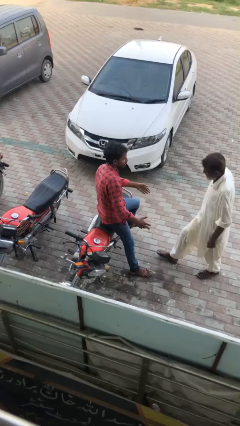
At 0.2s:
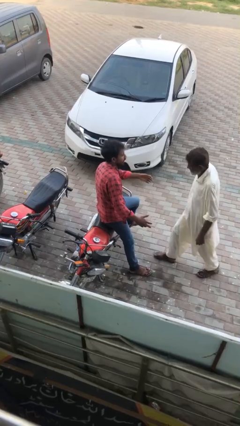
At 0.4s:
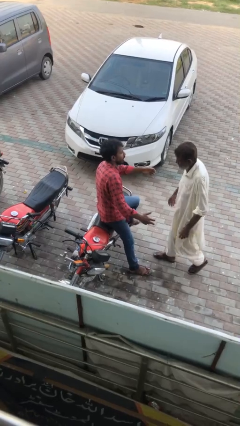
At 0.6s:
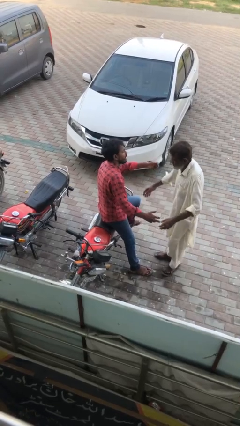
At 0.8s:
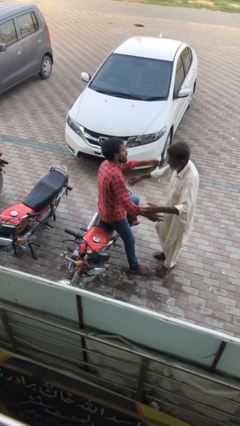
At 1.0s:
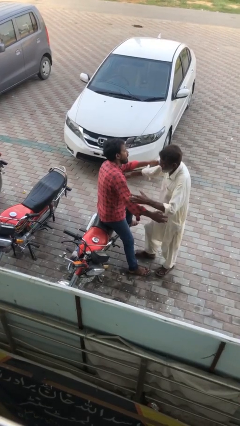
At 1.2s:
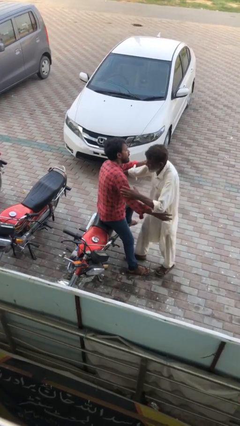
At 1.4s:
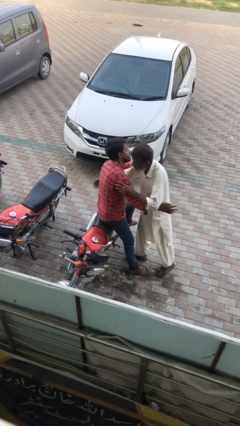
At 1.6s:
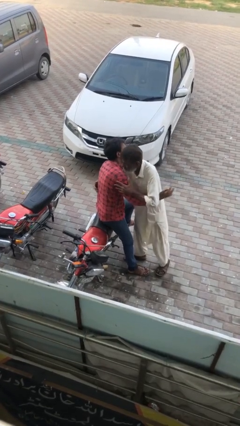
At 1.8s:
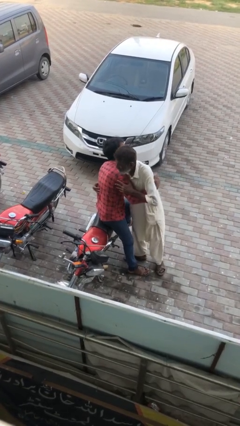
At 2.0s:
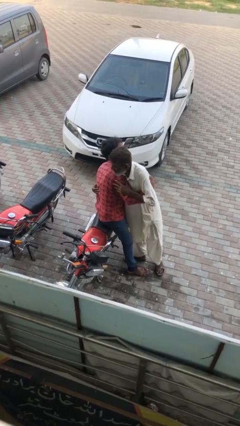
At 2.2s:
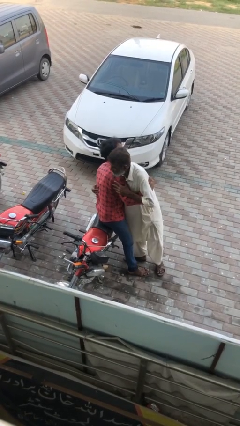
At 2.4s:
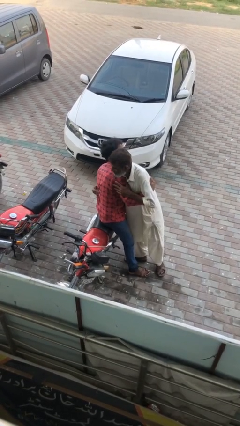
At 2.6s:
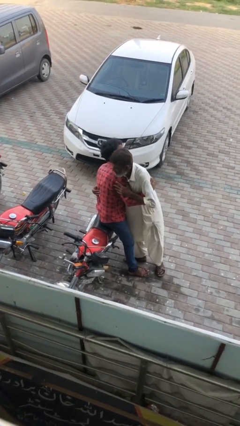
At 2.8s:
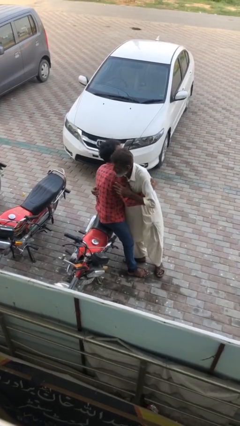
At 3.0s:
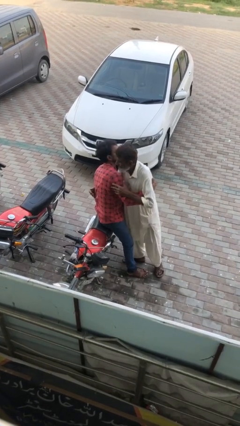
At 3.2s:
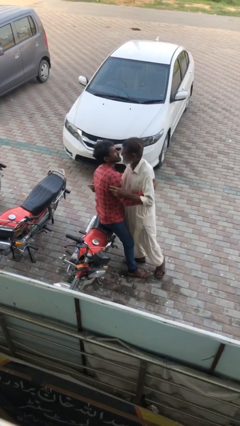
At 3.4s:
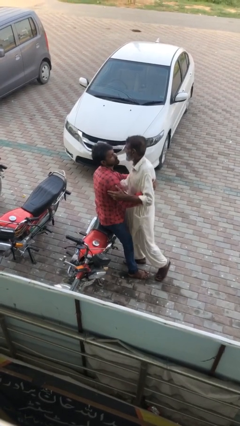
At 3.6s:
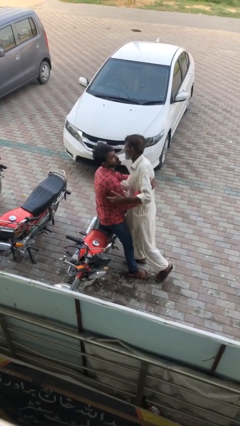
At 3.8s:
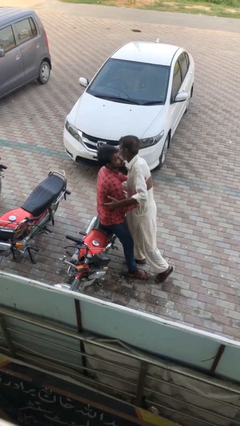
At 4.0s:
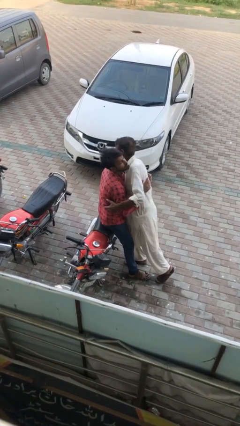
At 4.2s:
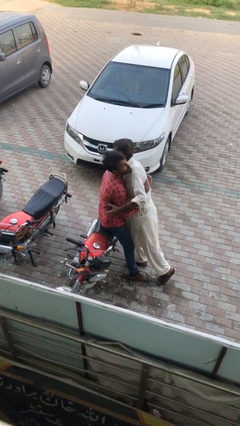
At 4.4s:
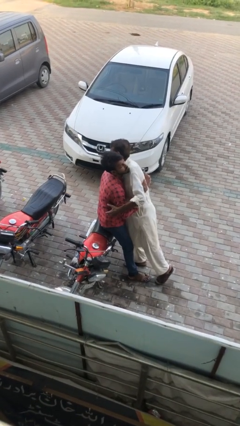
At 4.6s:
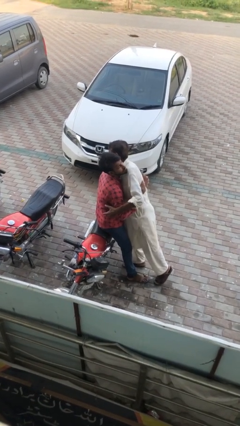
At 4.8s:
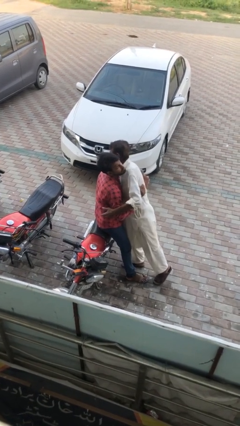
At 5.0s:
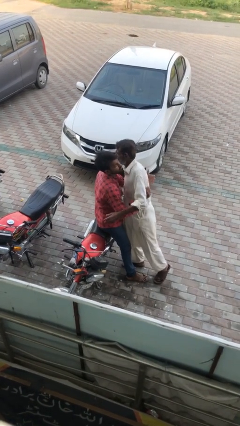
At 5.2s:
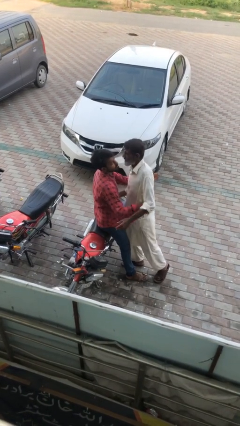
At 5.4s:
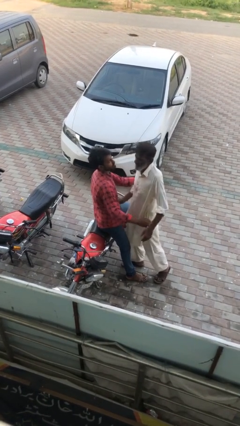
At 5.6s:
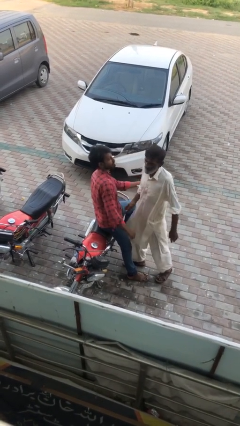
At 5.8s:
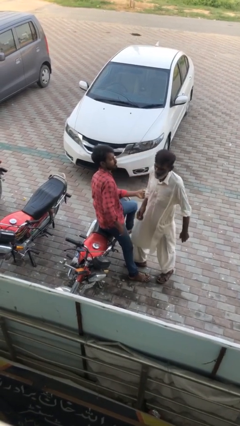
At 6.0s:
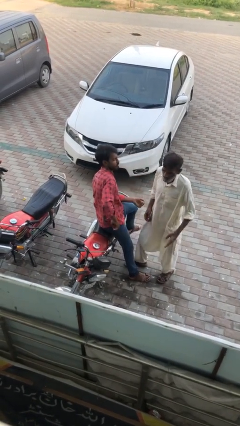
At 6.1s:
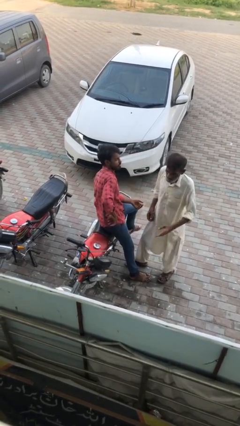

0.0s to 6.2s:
person embraces person

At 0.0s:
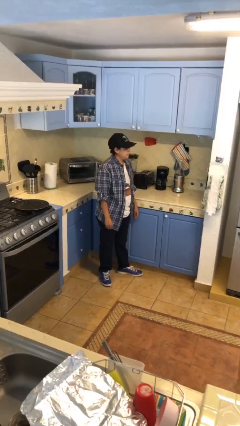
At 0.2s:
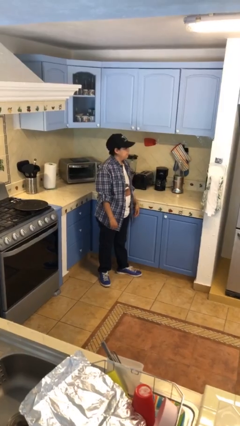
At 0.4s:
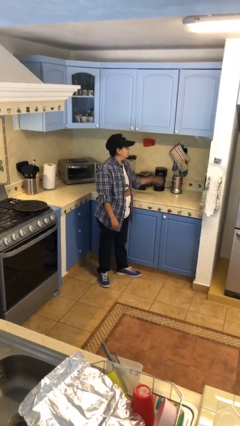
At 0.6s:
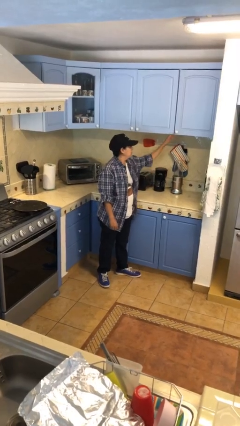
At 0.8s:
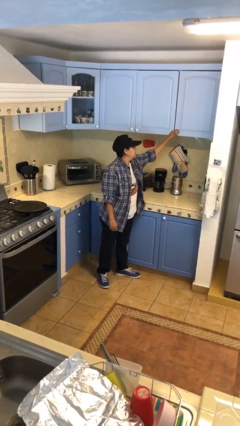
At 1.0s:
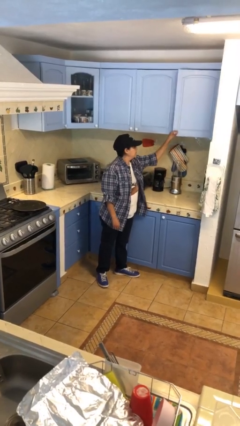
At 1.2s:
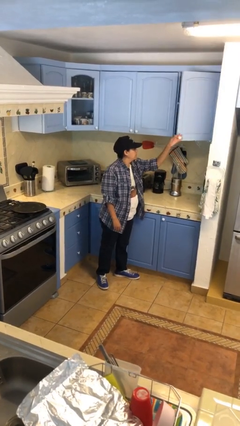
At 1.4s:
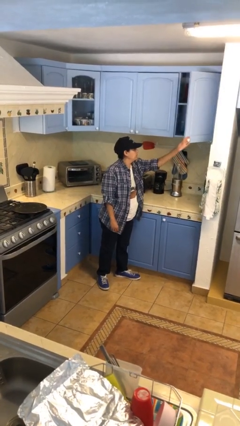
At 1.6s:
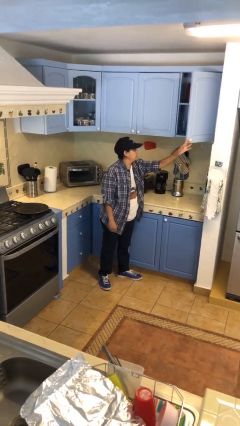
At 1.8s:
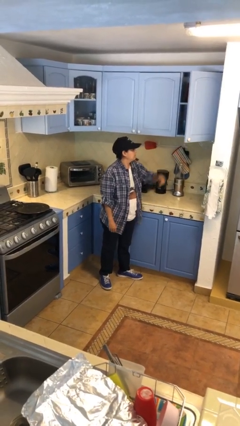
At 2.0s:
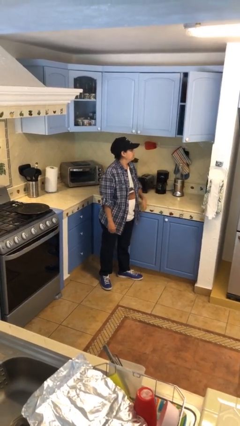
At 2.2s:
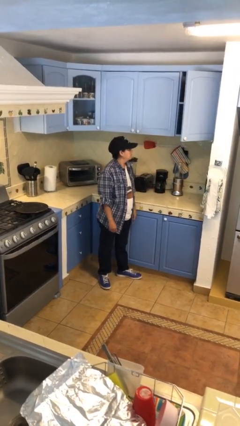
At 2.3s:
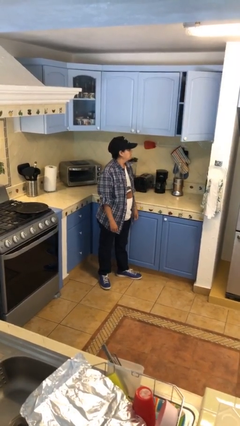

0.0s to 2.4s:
person opens cabinet

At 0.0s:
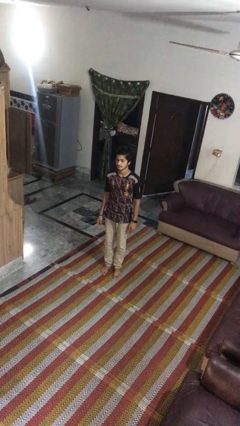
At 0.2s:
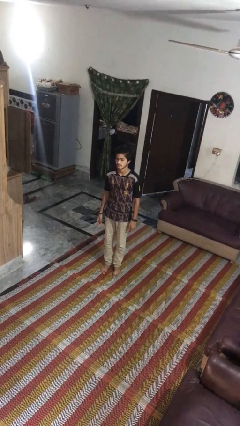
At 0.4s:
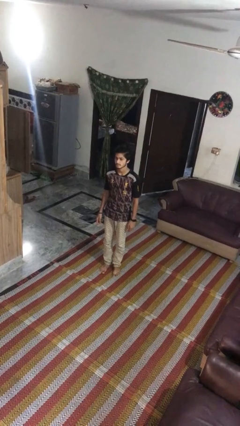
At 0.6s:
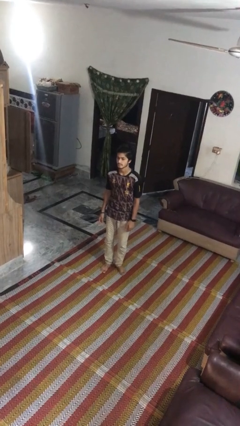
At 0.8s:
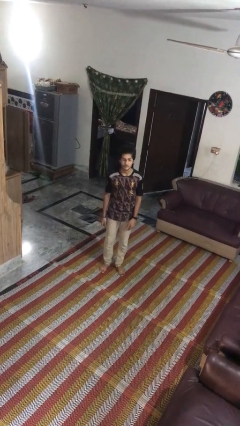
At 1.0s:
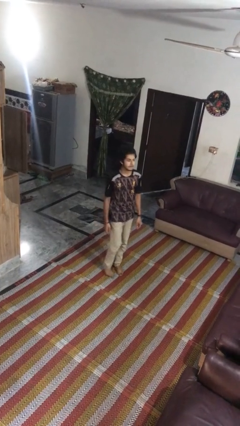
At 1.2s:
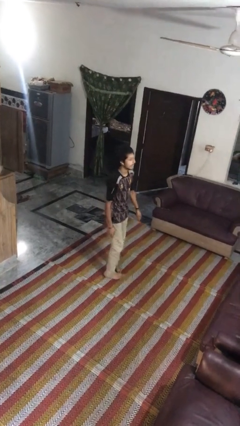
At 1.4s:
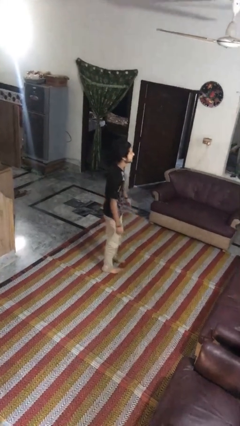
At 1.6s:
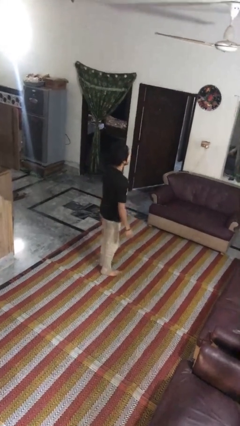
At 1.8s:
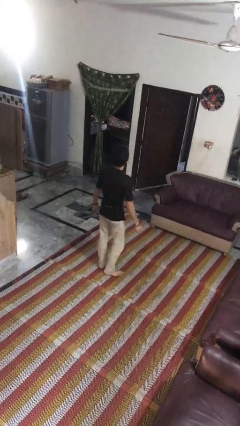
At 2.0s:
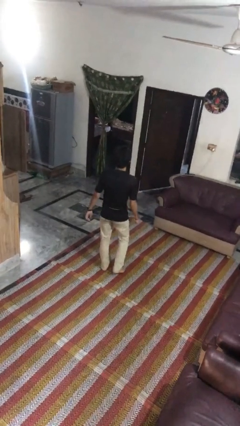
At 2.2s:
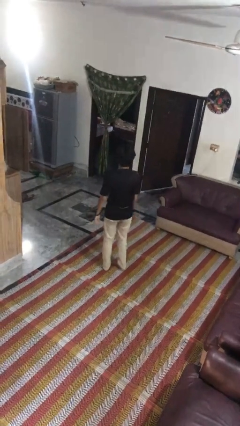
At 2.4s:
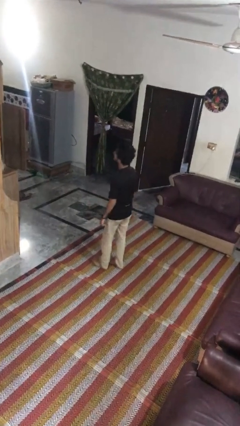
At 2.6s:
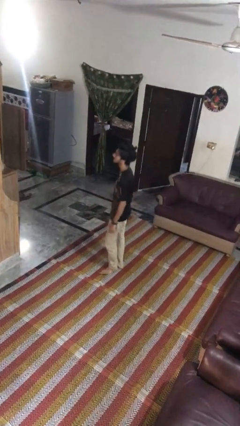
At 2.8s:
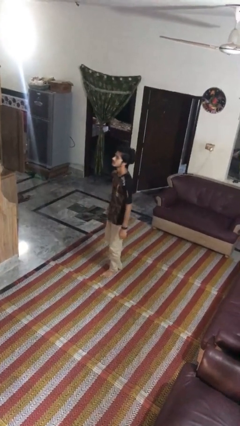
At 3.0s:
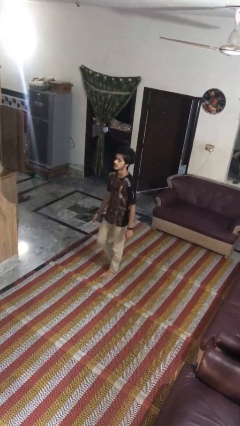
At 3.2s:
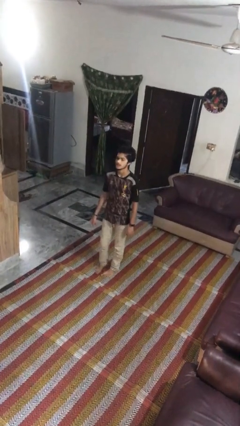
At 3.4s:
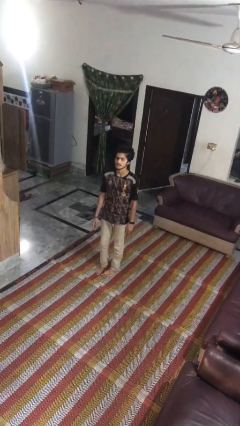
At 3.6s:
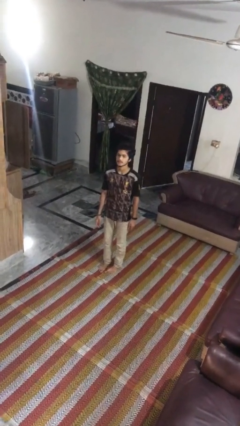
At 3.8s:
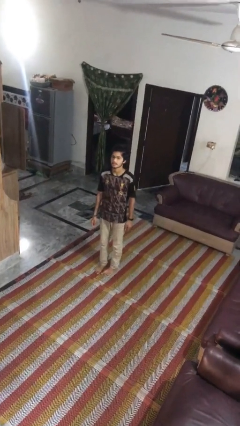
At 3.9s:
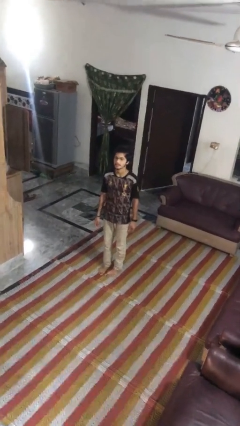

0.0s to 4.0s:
person twirls

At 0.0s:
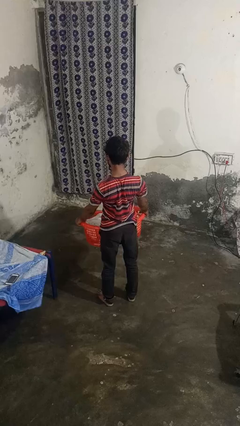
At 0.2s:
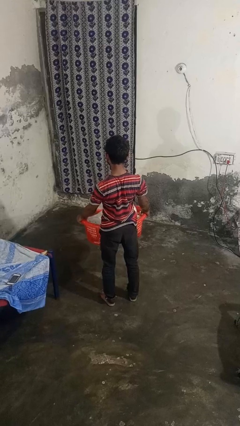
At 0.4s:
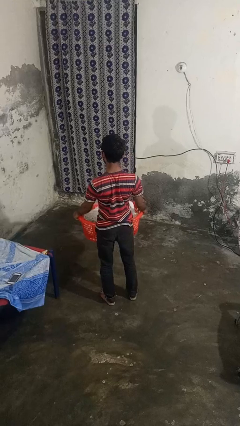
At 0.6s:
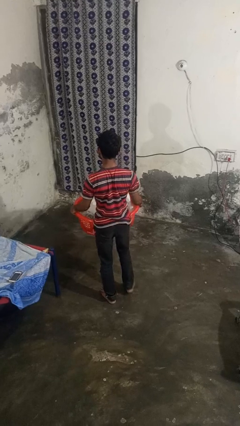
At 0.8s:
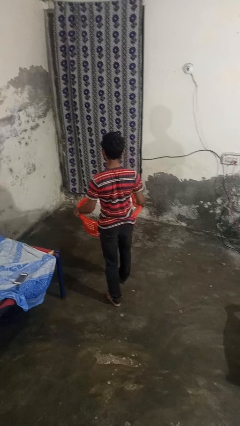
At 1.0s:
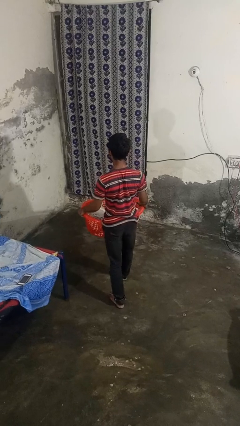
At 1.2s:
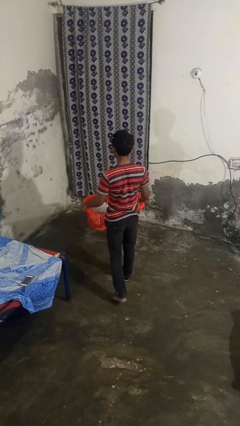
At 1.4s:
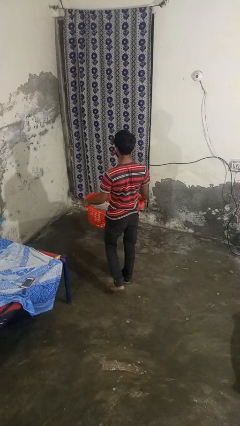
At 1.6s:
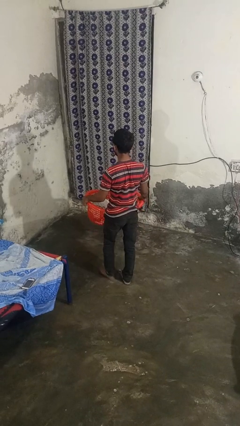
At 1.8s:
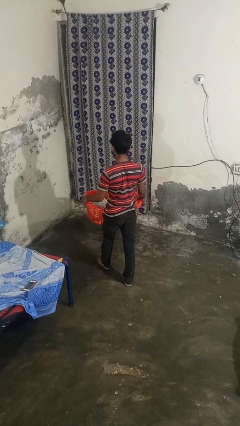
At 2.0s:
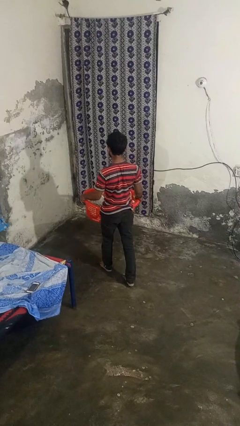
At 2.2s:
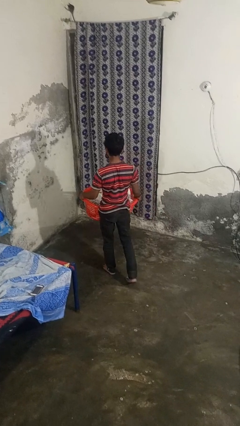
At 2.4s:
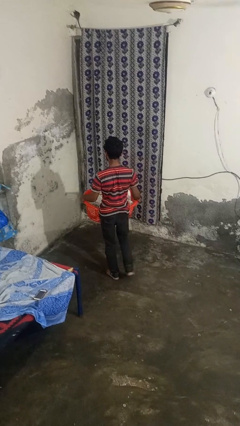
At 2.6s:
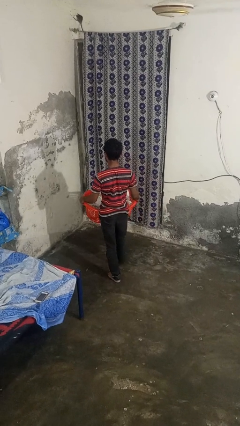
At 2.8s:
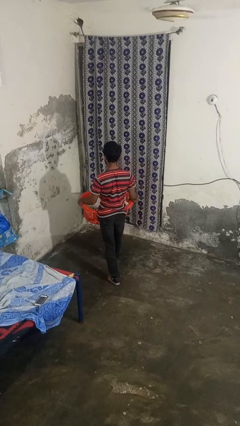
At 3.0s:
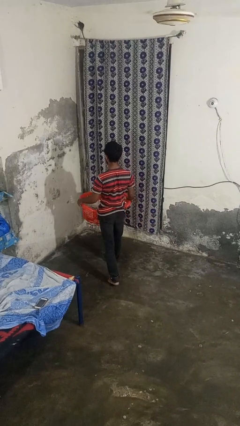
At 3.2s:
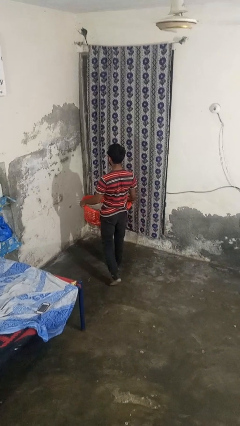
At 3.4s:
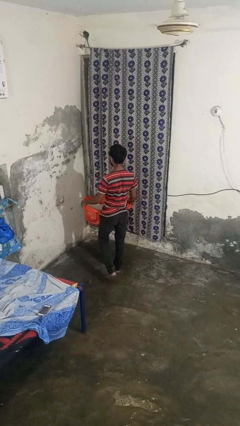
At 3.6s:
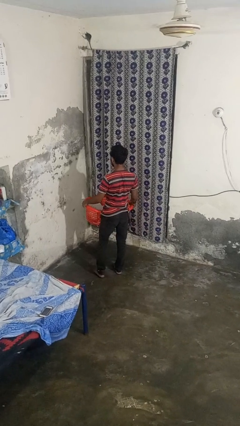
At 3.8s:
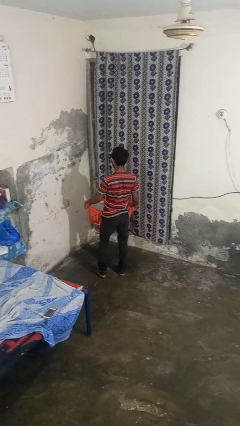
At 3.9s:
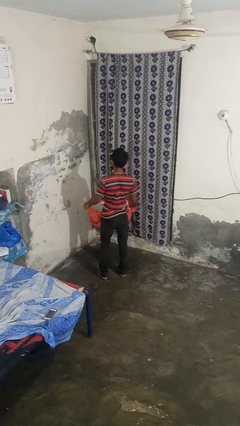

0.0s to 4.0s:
person carries laundry basket

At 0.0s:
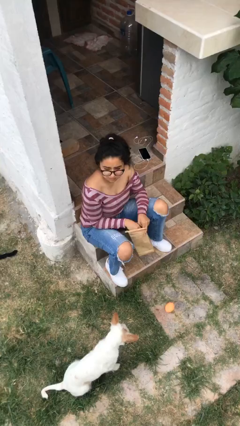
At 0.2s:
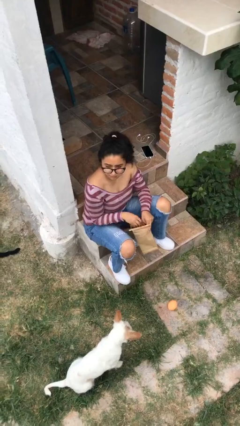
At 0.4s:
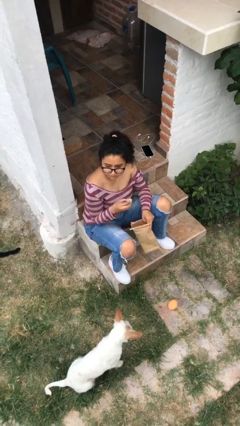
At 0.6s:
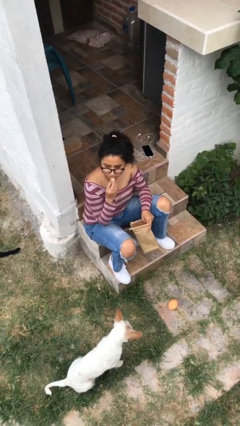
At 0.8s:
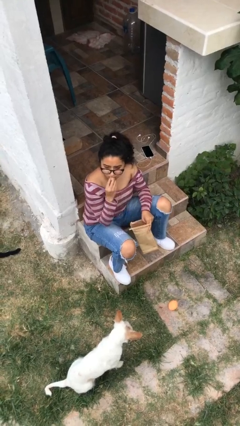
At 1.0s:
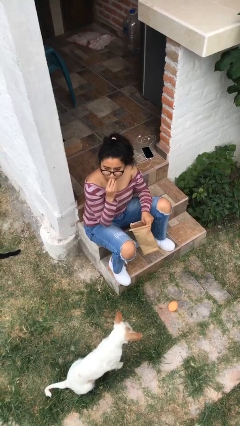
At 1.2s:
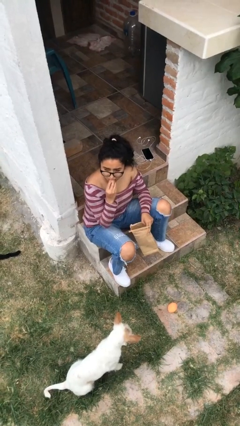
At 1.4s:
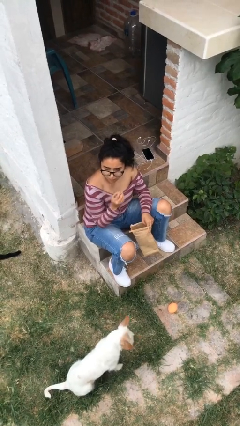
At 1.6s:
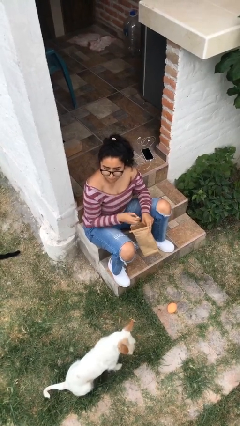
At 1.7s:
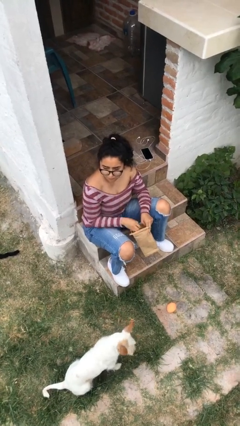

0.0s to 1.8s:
person eats snack from bag
